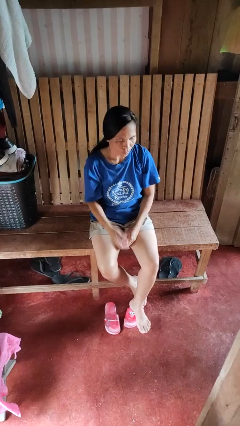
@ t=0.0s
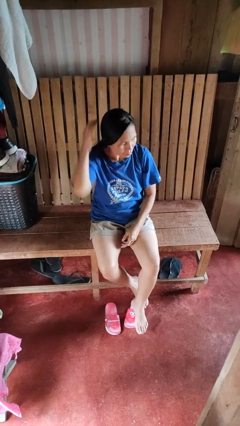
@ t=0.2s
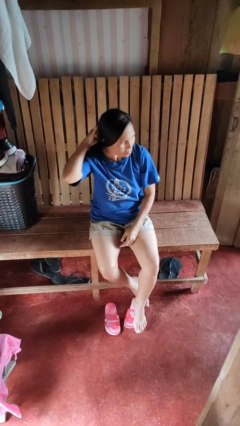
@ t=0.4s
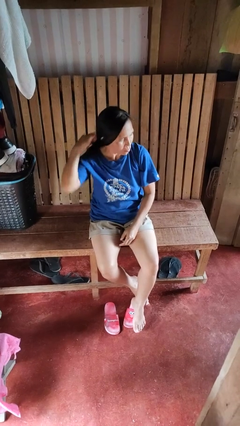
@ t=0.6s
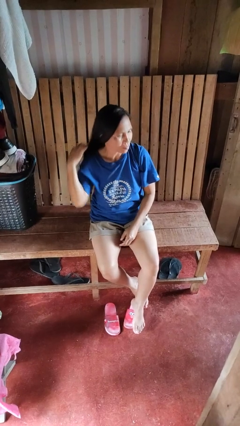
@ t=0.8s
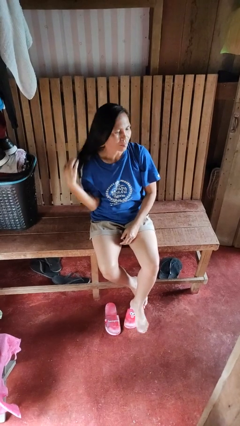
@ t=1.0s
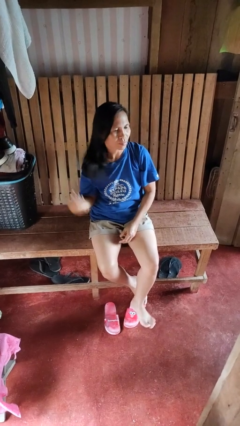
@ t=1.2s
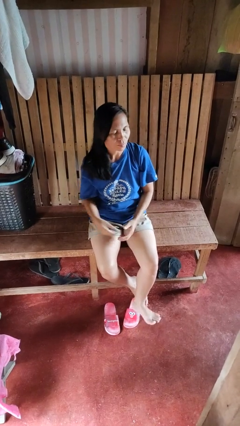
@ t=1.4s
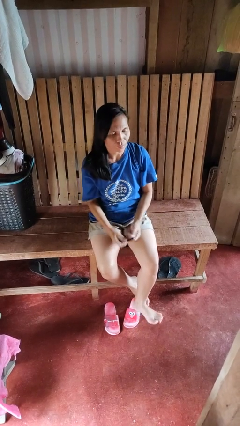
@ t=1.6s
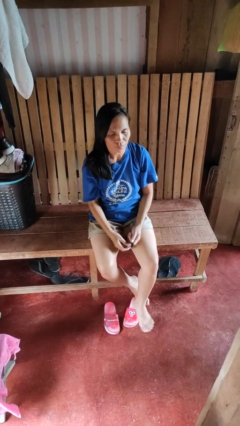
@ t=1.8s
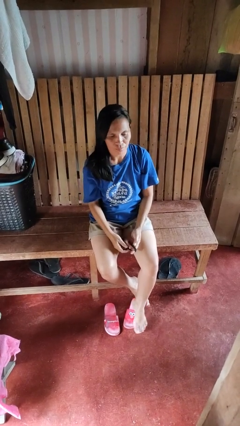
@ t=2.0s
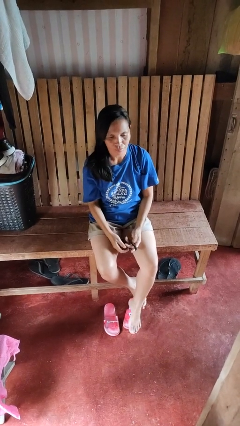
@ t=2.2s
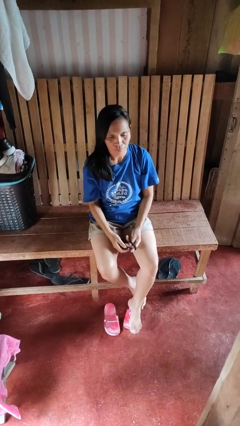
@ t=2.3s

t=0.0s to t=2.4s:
person takes off hairtie

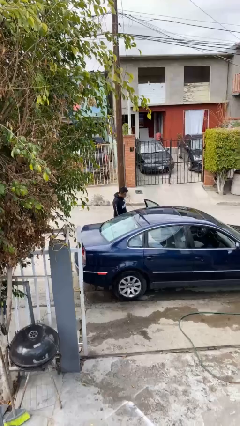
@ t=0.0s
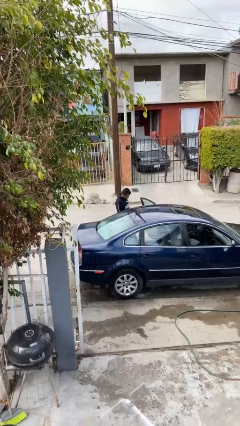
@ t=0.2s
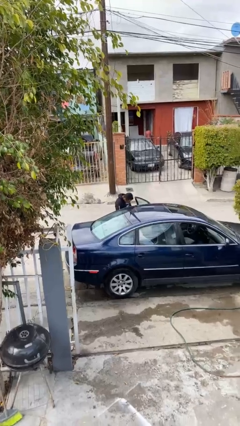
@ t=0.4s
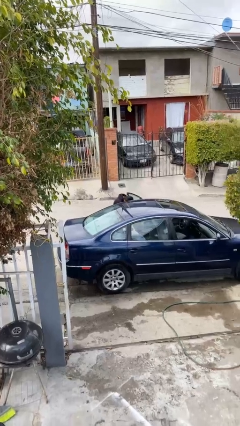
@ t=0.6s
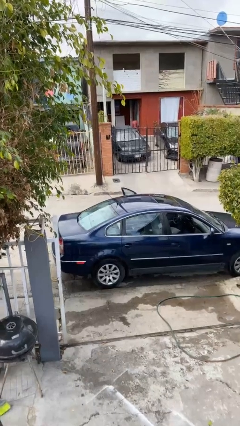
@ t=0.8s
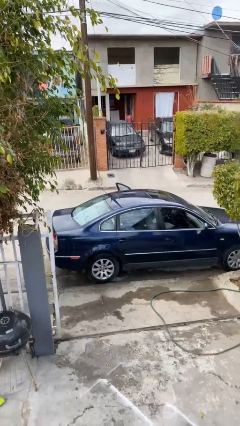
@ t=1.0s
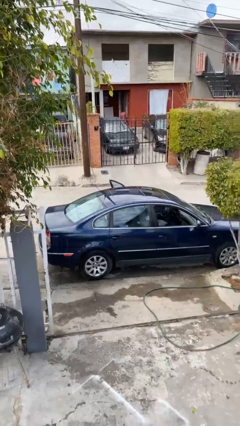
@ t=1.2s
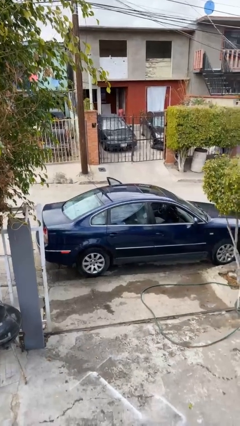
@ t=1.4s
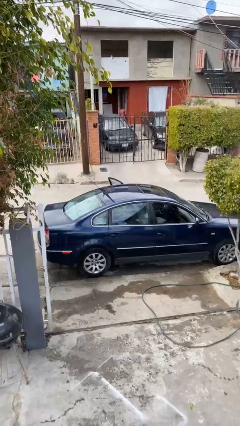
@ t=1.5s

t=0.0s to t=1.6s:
person enters car

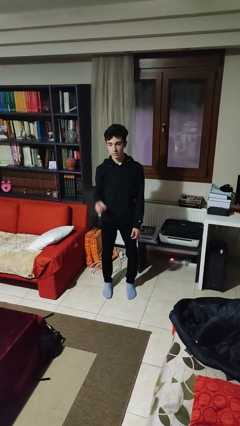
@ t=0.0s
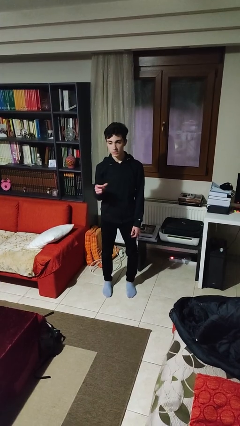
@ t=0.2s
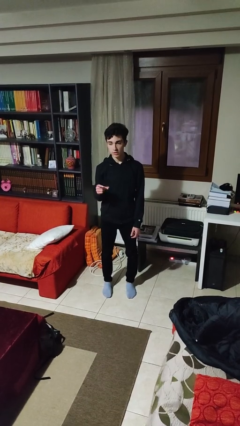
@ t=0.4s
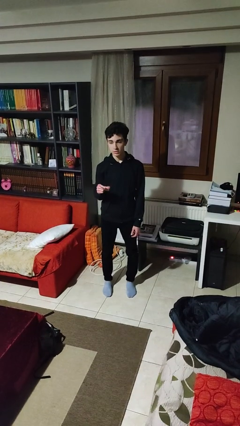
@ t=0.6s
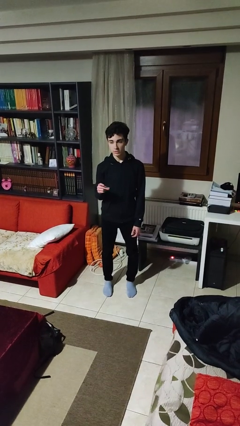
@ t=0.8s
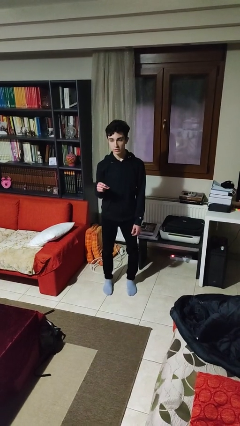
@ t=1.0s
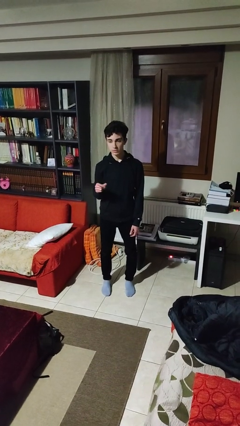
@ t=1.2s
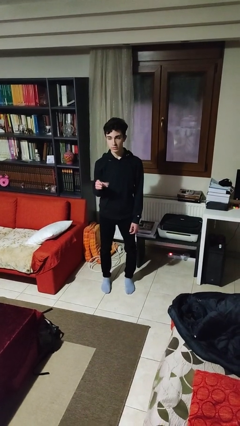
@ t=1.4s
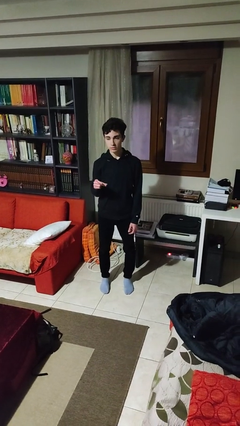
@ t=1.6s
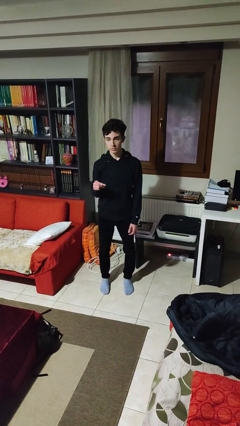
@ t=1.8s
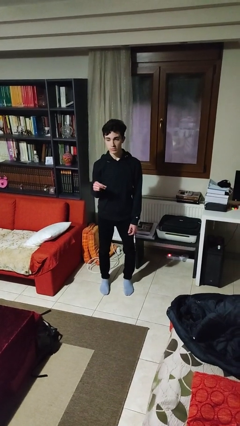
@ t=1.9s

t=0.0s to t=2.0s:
person snaps fingers

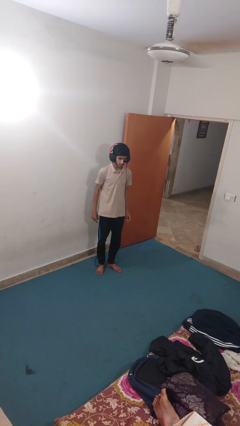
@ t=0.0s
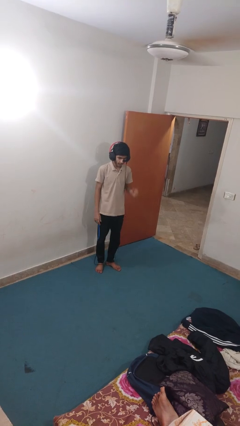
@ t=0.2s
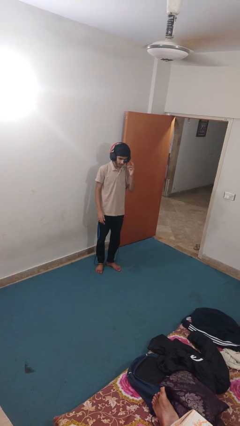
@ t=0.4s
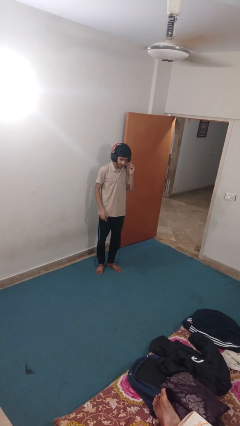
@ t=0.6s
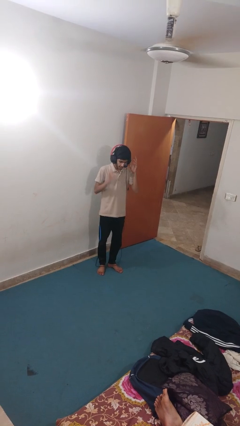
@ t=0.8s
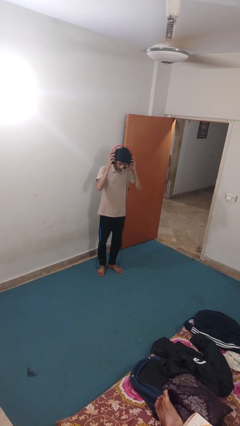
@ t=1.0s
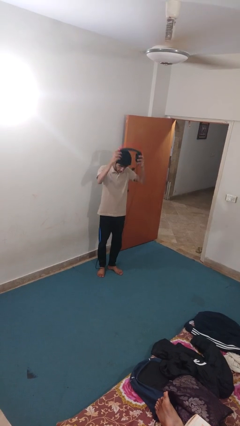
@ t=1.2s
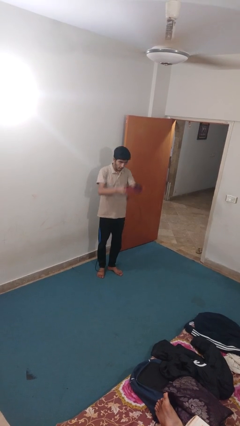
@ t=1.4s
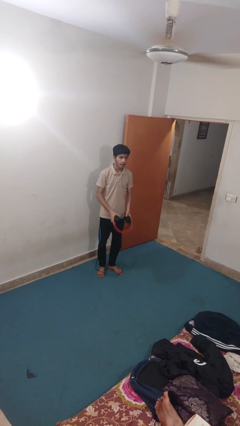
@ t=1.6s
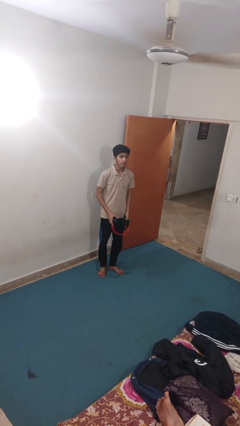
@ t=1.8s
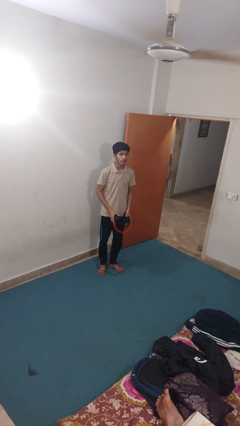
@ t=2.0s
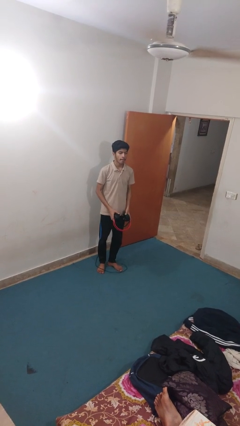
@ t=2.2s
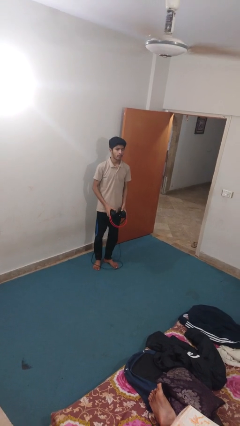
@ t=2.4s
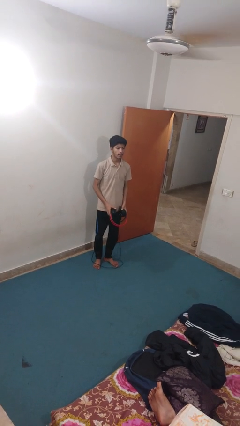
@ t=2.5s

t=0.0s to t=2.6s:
person takes off headphones

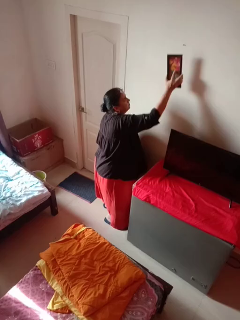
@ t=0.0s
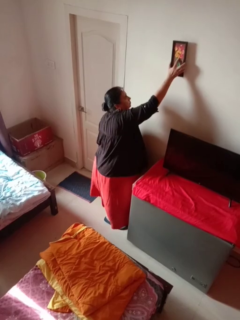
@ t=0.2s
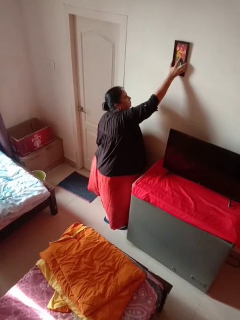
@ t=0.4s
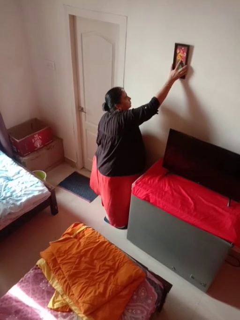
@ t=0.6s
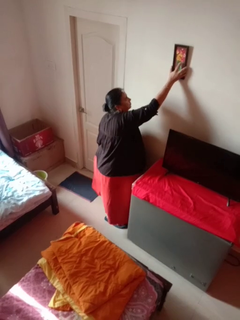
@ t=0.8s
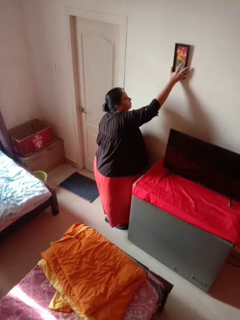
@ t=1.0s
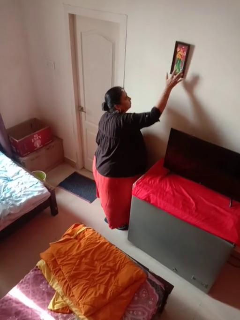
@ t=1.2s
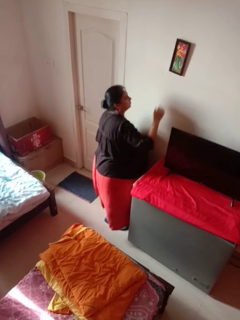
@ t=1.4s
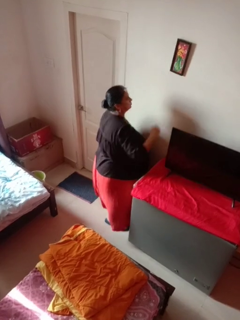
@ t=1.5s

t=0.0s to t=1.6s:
person puts up picture frame

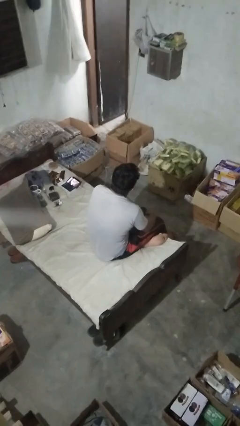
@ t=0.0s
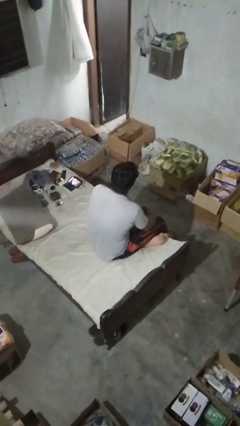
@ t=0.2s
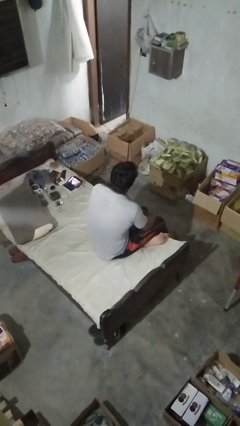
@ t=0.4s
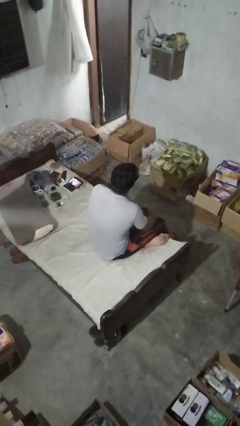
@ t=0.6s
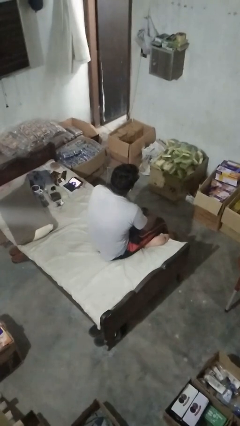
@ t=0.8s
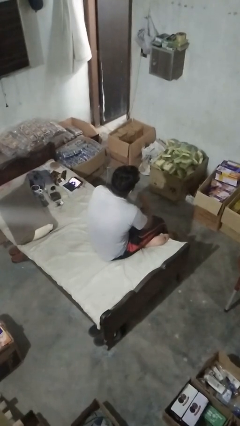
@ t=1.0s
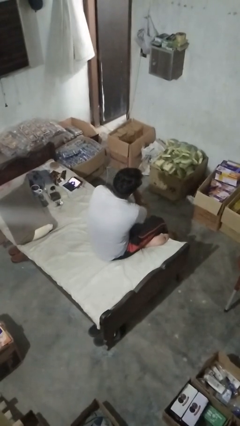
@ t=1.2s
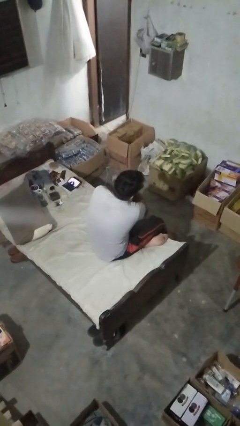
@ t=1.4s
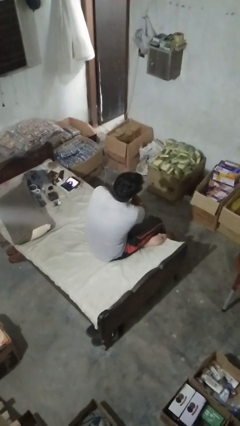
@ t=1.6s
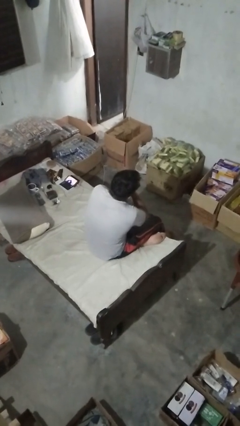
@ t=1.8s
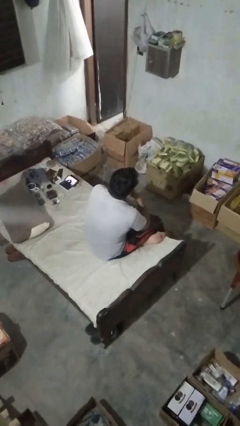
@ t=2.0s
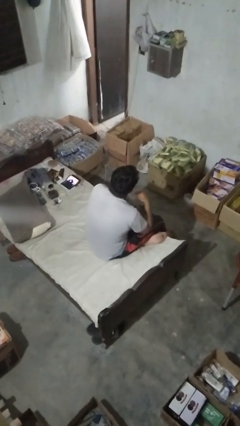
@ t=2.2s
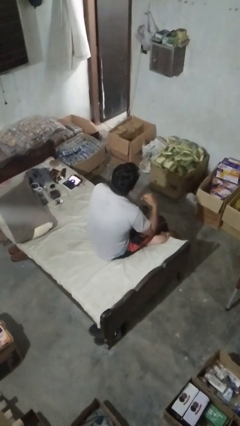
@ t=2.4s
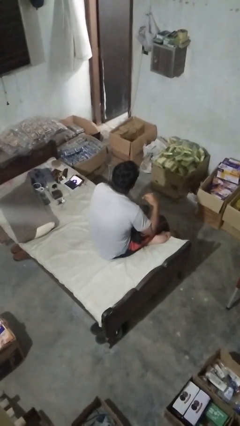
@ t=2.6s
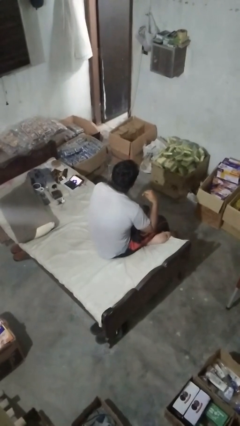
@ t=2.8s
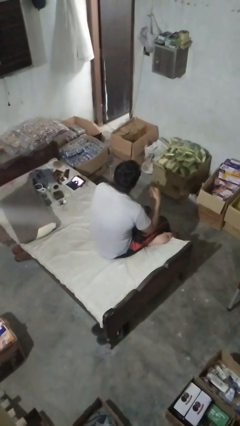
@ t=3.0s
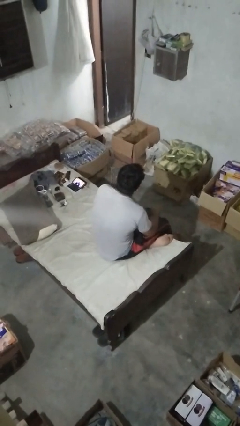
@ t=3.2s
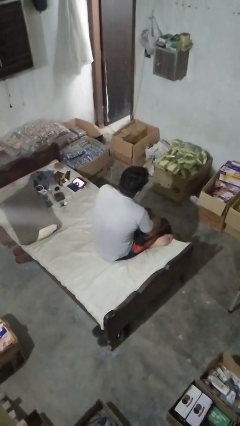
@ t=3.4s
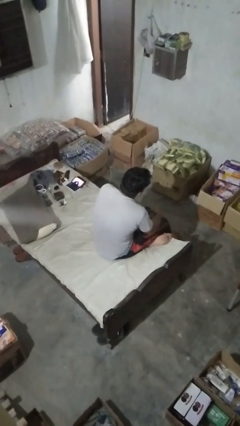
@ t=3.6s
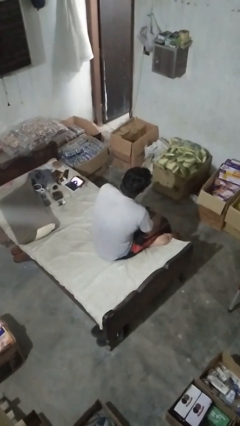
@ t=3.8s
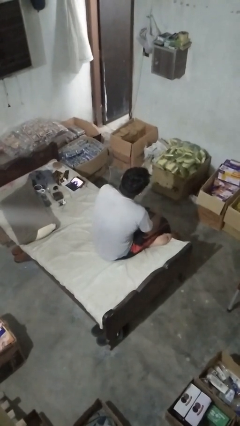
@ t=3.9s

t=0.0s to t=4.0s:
person gestures cut

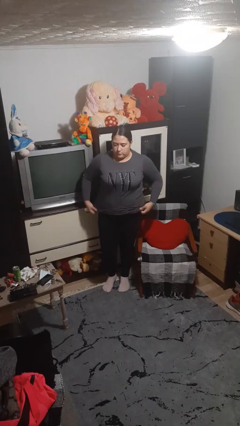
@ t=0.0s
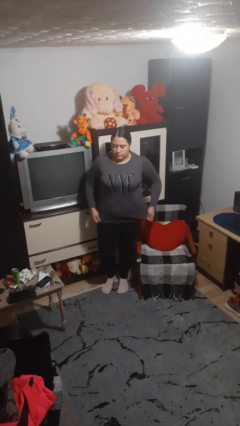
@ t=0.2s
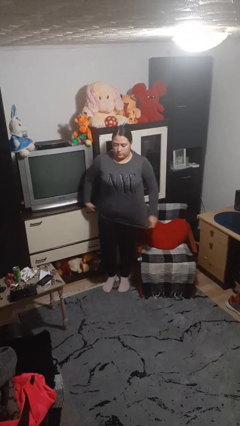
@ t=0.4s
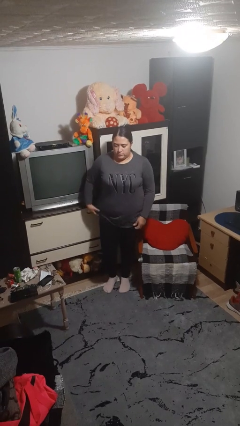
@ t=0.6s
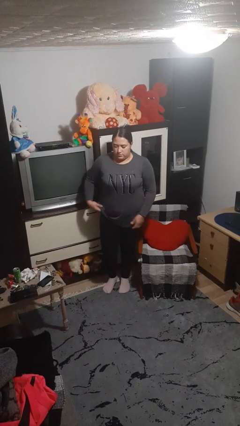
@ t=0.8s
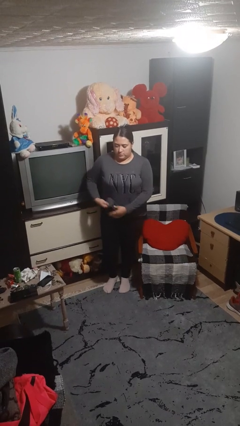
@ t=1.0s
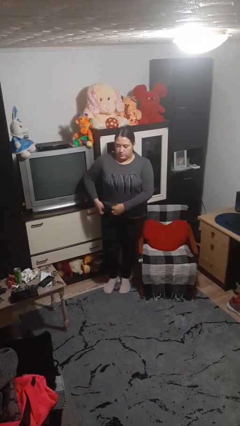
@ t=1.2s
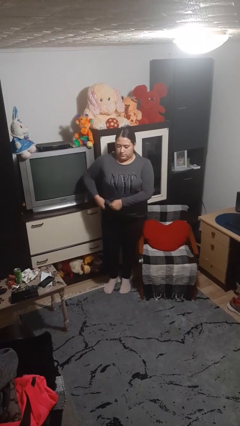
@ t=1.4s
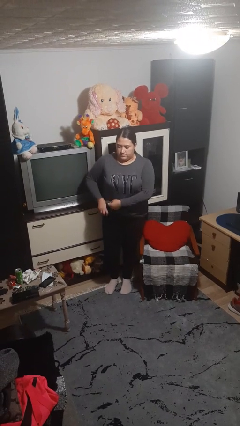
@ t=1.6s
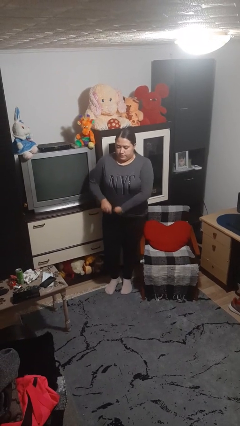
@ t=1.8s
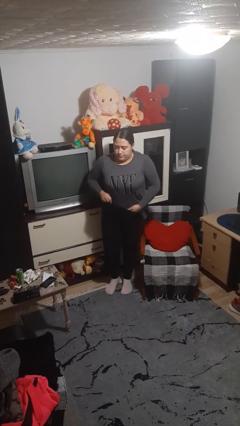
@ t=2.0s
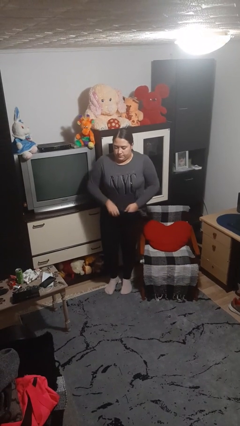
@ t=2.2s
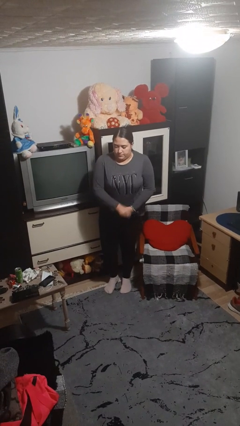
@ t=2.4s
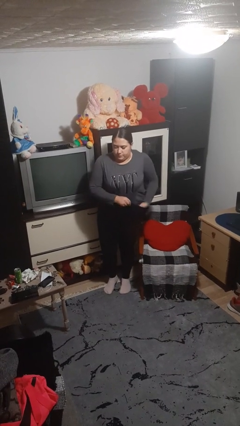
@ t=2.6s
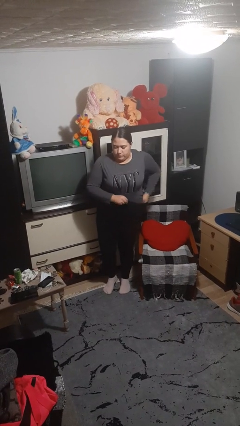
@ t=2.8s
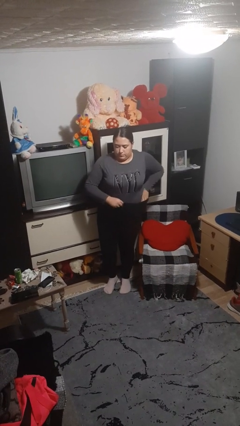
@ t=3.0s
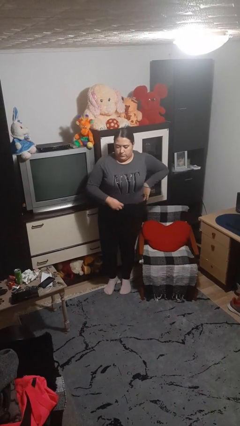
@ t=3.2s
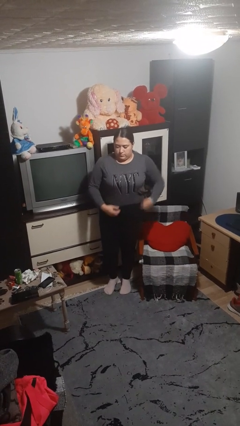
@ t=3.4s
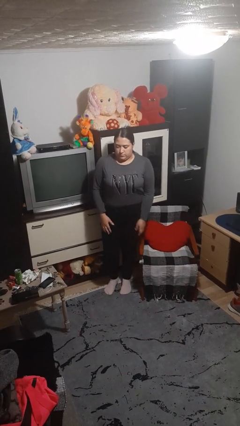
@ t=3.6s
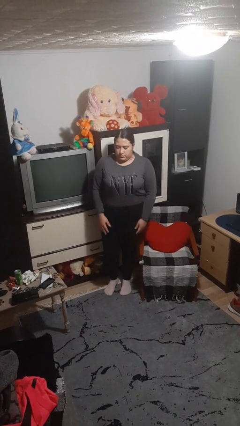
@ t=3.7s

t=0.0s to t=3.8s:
person tucks in shirt
